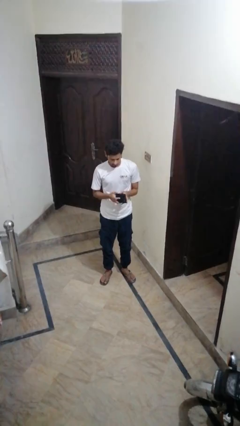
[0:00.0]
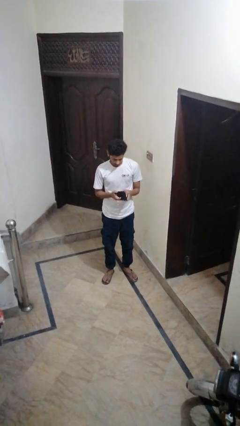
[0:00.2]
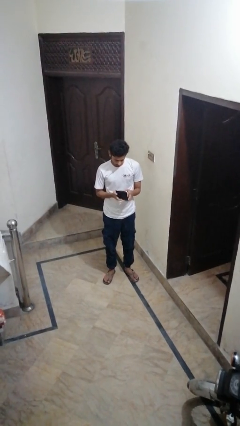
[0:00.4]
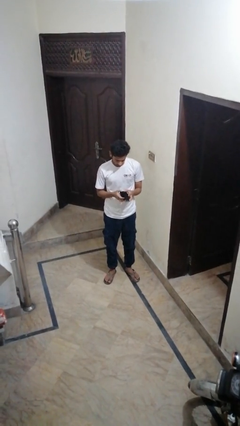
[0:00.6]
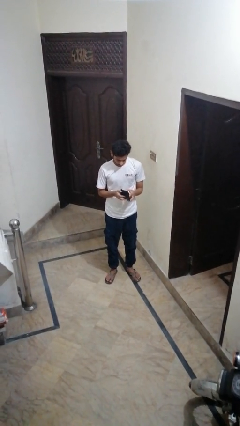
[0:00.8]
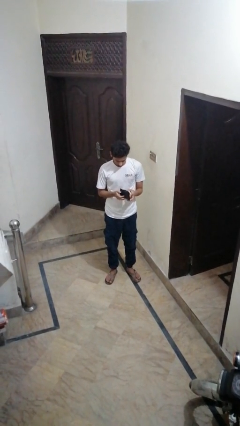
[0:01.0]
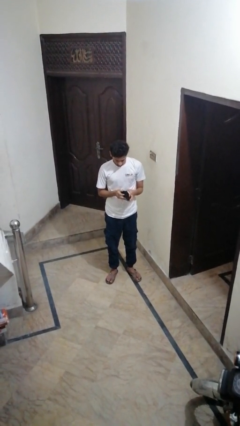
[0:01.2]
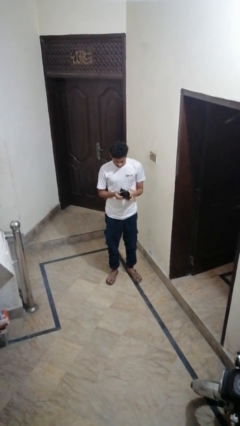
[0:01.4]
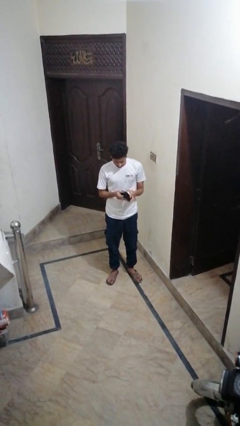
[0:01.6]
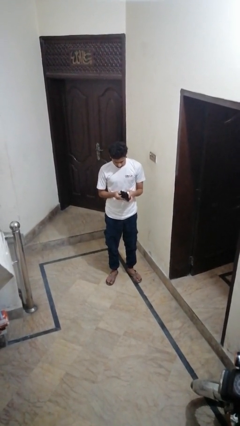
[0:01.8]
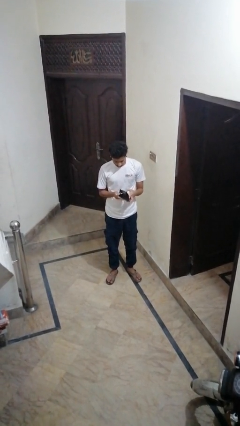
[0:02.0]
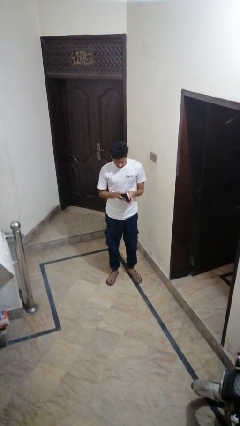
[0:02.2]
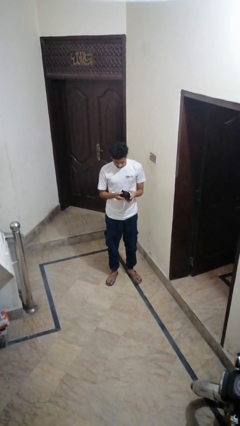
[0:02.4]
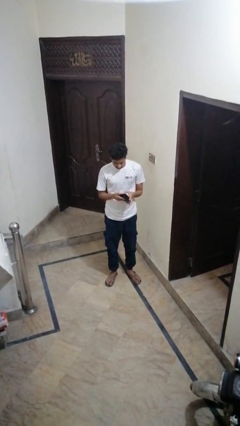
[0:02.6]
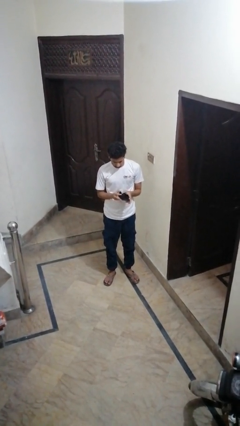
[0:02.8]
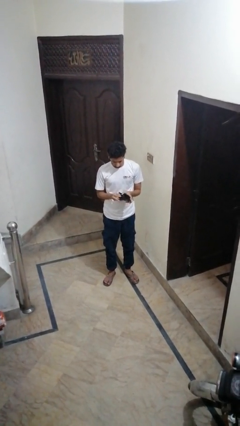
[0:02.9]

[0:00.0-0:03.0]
person searches in purse

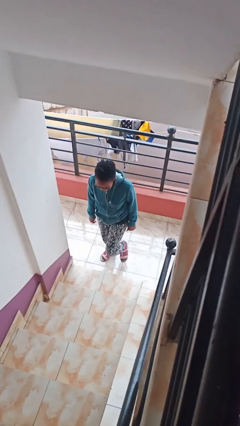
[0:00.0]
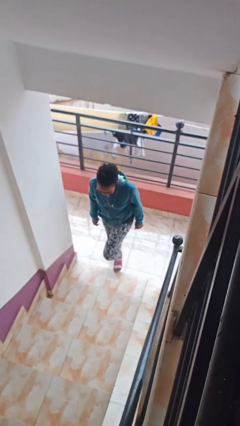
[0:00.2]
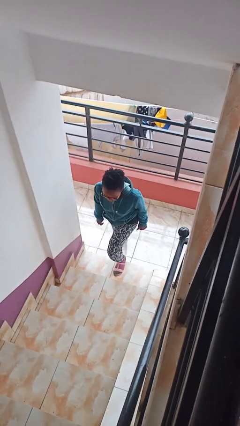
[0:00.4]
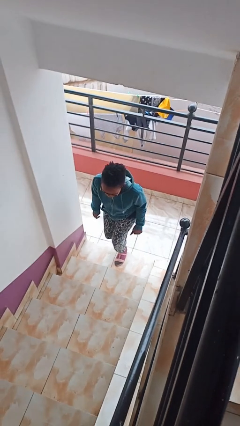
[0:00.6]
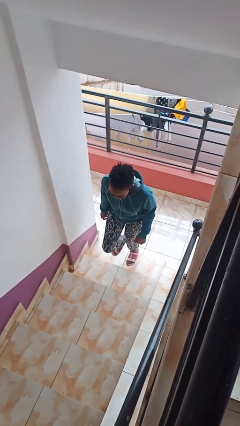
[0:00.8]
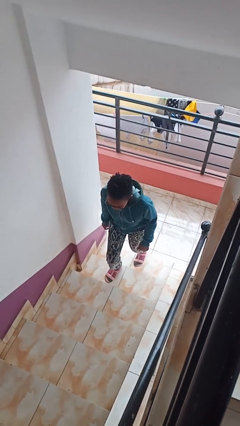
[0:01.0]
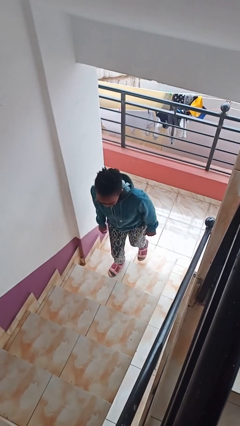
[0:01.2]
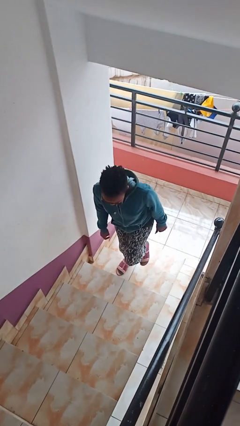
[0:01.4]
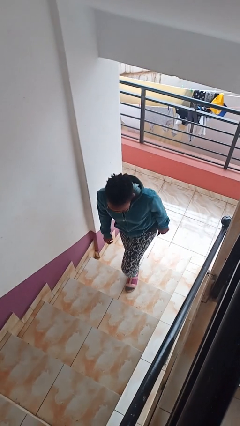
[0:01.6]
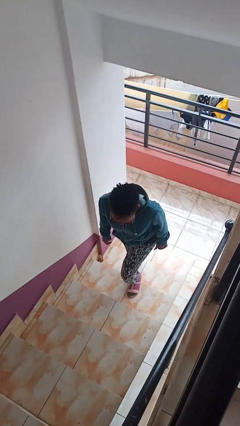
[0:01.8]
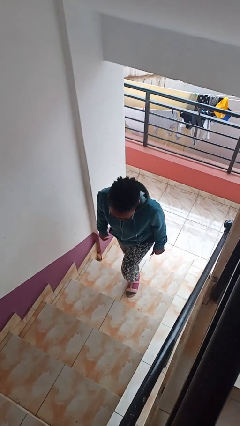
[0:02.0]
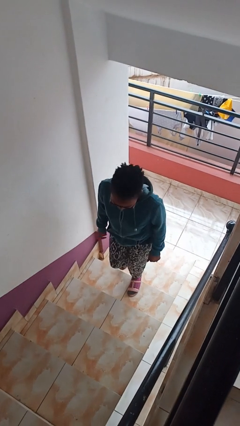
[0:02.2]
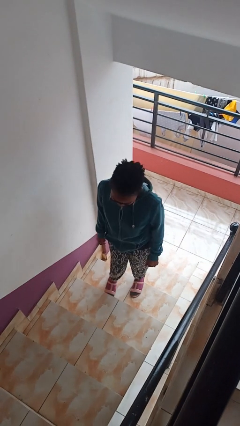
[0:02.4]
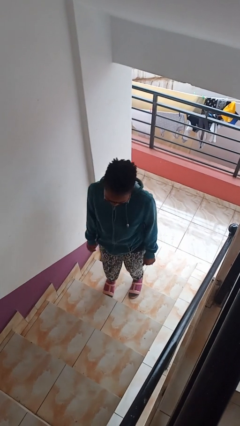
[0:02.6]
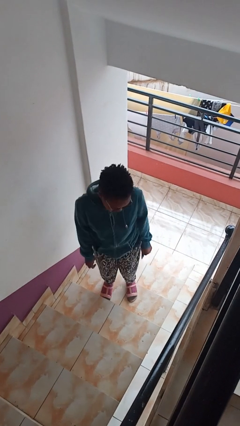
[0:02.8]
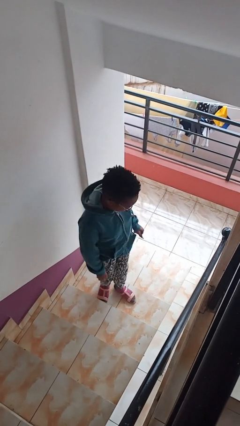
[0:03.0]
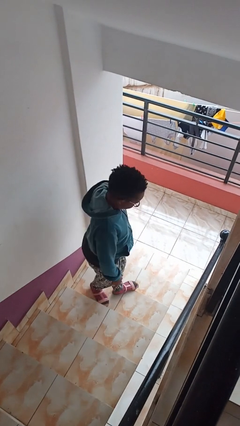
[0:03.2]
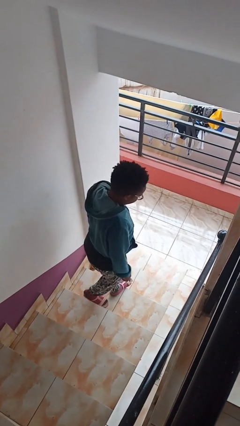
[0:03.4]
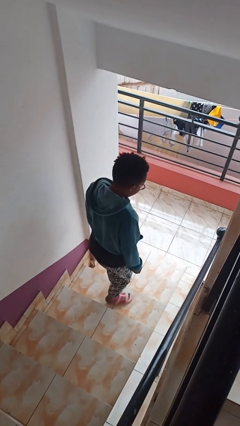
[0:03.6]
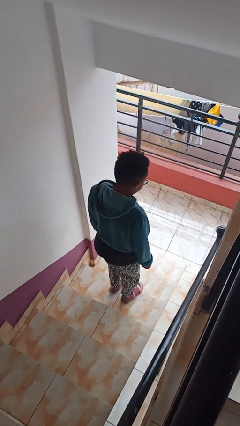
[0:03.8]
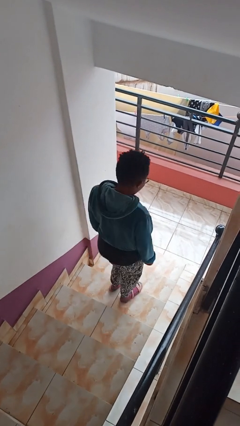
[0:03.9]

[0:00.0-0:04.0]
person climbs up stairs

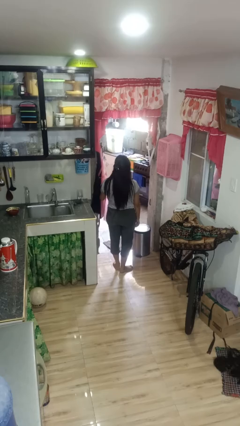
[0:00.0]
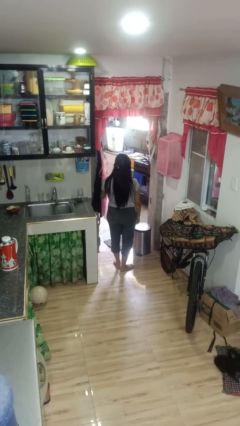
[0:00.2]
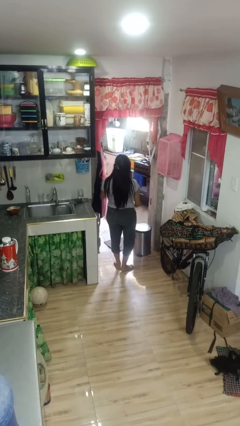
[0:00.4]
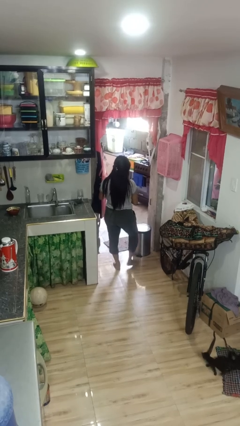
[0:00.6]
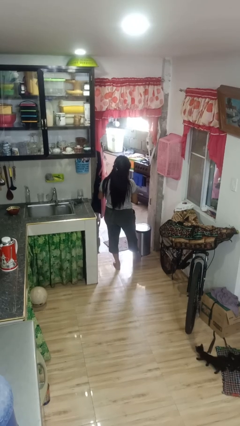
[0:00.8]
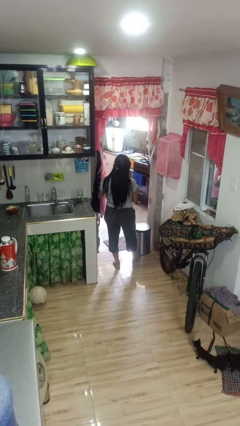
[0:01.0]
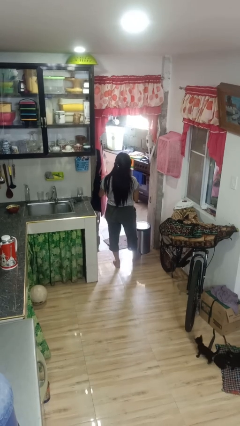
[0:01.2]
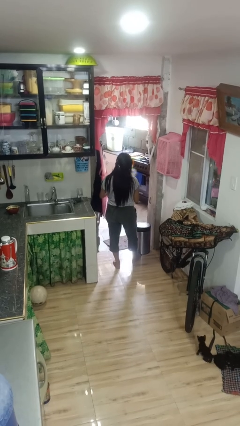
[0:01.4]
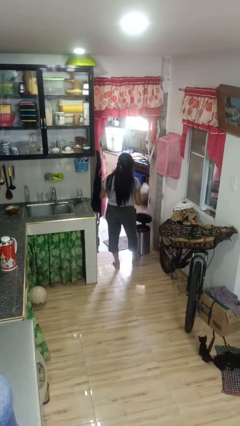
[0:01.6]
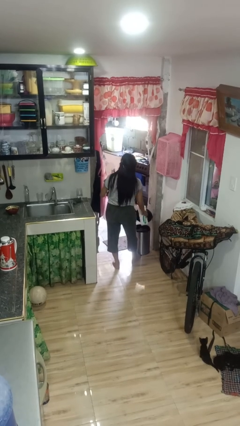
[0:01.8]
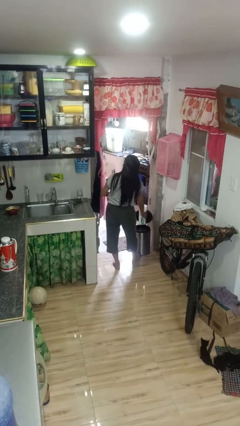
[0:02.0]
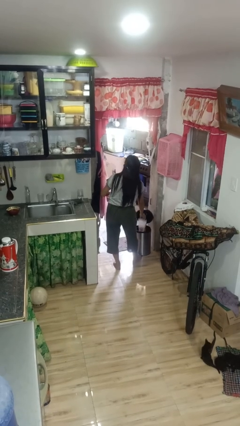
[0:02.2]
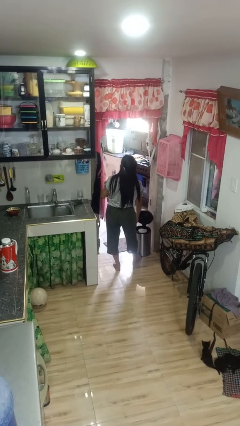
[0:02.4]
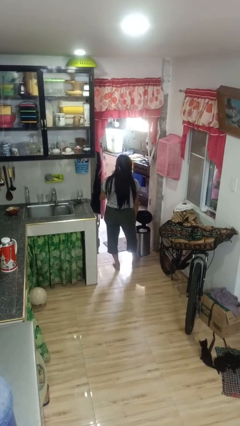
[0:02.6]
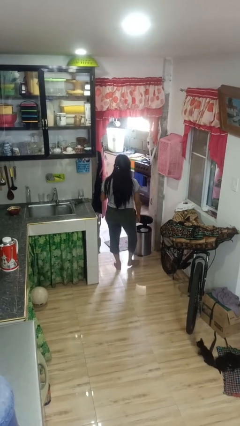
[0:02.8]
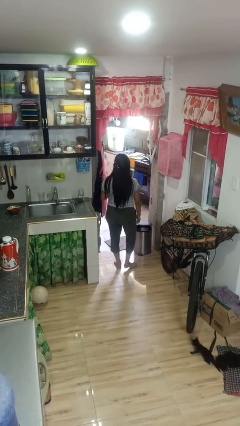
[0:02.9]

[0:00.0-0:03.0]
person discards trash

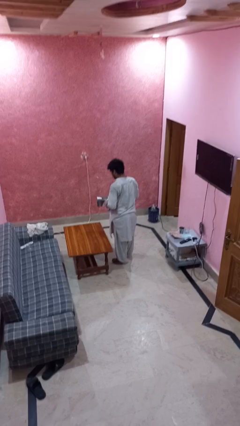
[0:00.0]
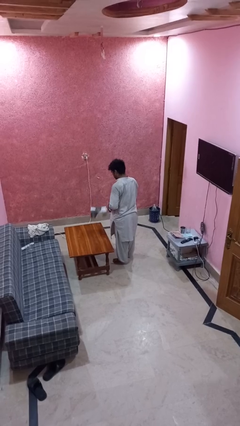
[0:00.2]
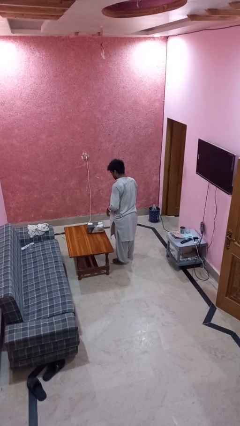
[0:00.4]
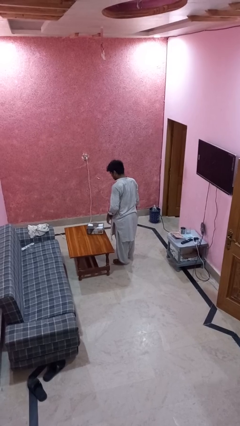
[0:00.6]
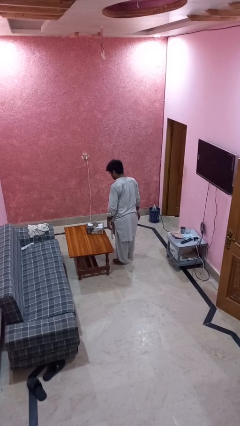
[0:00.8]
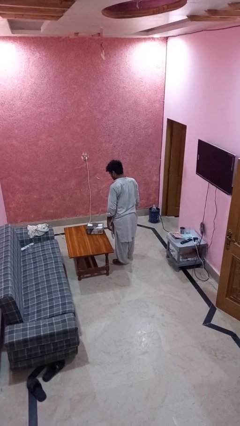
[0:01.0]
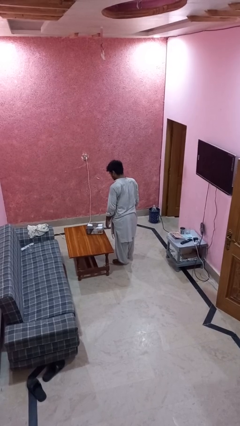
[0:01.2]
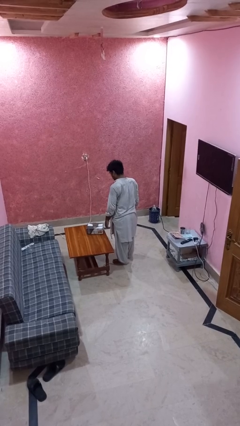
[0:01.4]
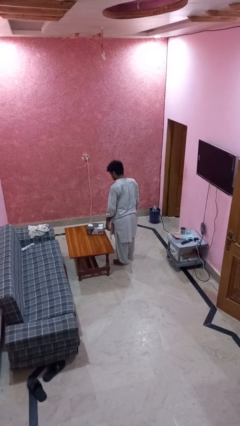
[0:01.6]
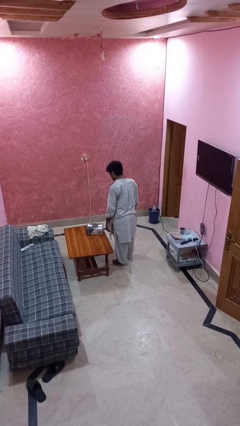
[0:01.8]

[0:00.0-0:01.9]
person throws object on table

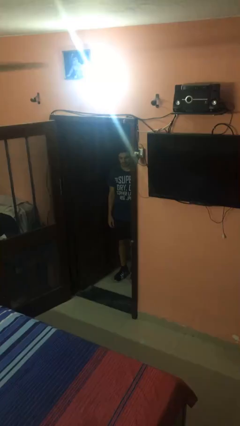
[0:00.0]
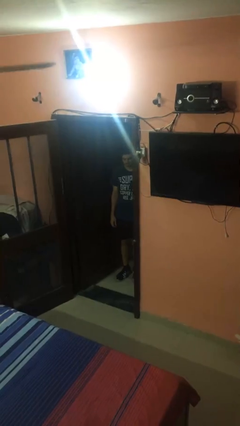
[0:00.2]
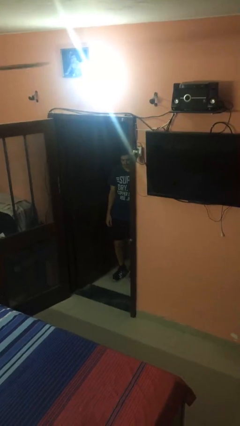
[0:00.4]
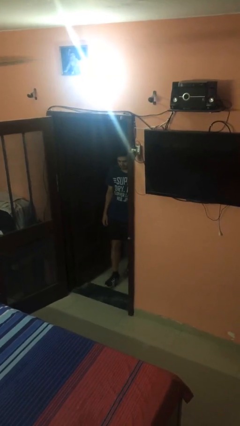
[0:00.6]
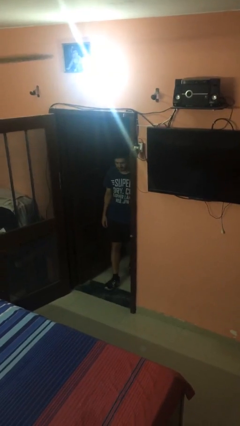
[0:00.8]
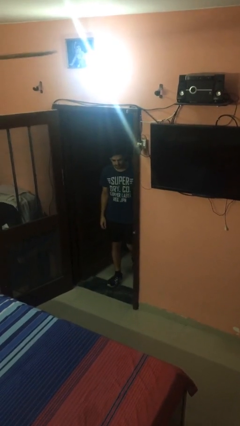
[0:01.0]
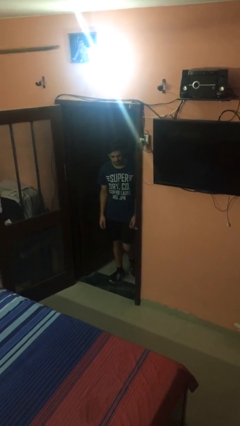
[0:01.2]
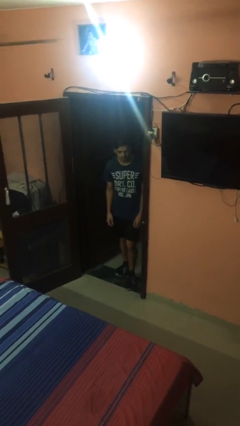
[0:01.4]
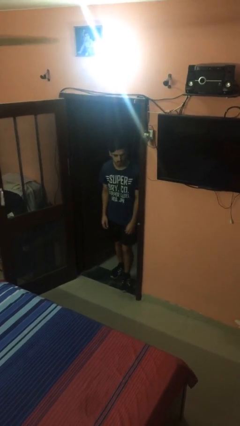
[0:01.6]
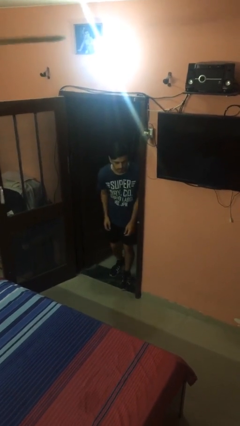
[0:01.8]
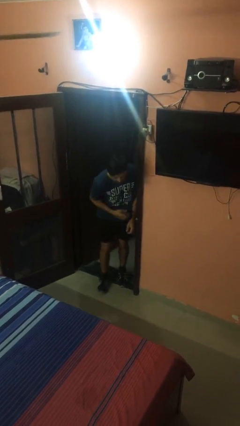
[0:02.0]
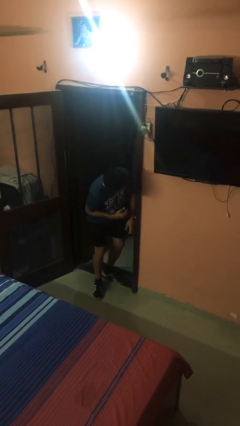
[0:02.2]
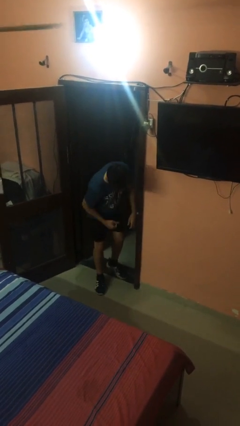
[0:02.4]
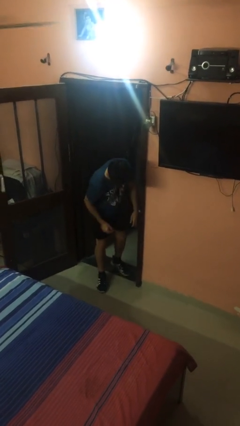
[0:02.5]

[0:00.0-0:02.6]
person bumps into wall

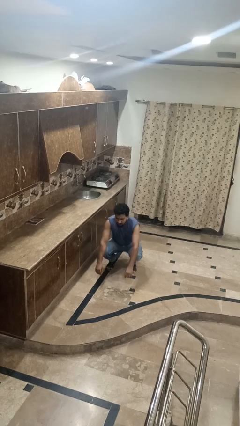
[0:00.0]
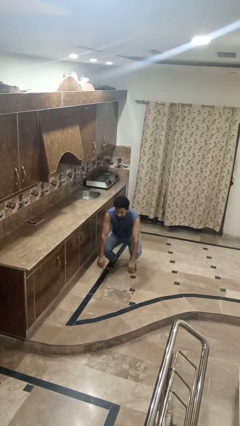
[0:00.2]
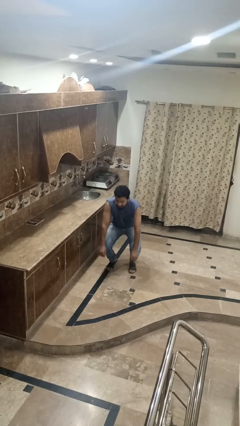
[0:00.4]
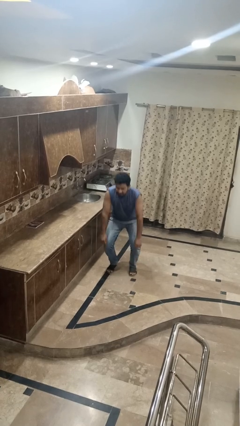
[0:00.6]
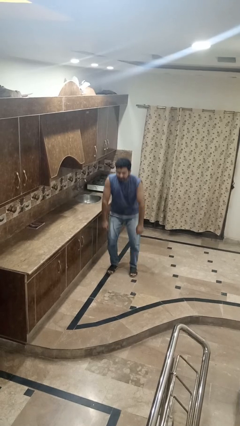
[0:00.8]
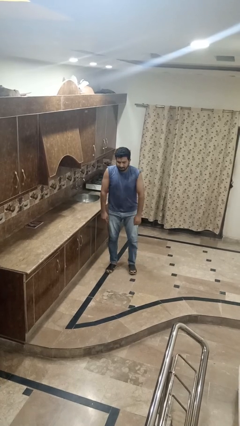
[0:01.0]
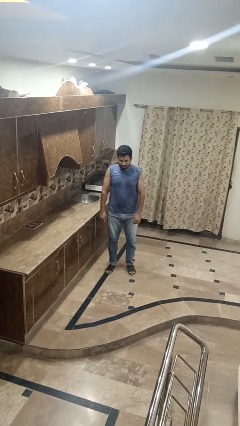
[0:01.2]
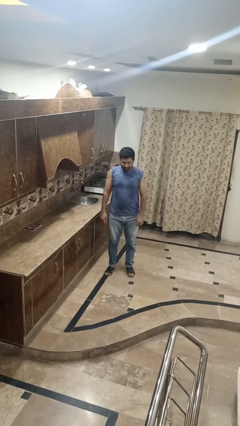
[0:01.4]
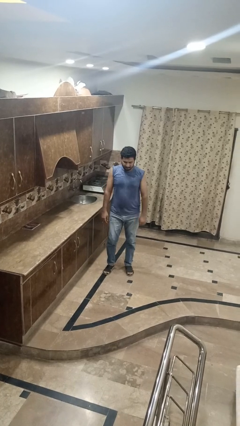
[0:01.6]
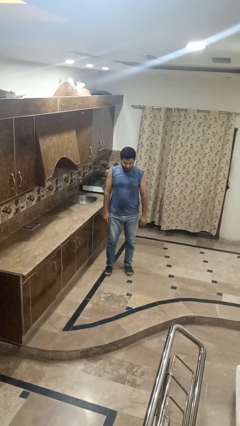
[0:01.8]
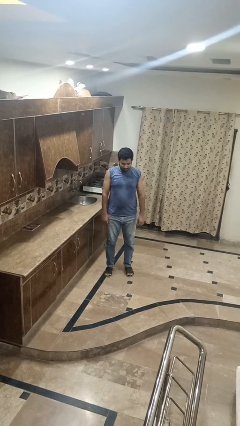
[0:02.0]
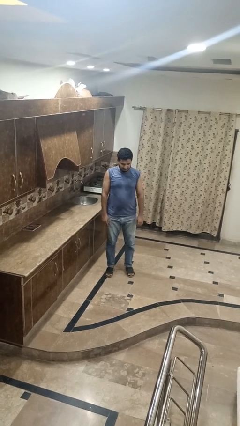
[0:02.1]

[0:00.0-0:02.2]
person stands up

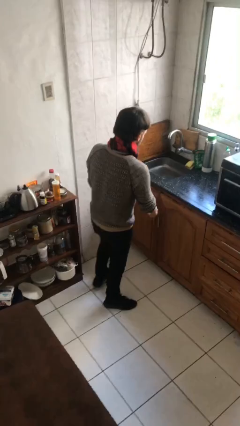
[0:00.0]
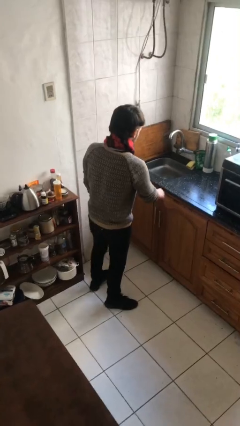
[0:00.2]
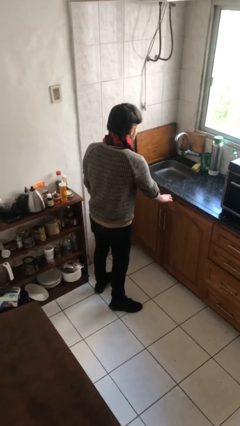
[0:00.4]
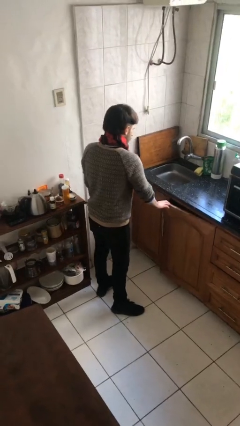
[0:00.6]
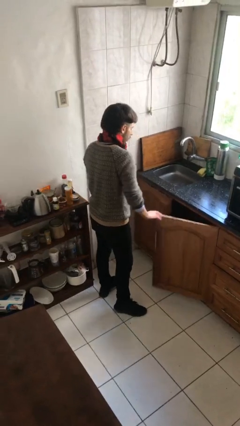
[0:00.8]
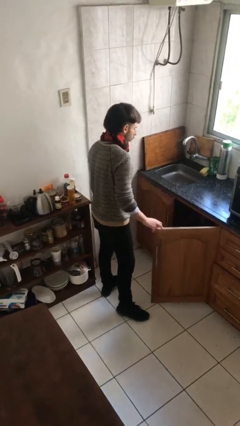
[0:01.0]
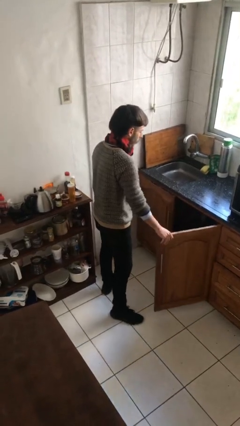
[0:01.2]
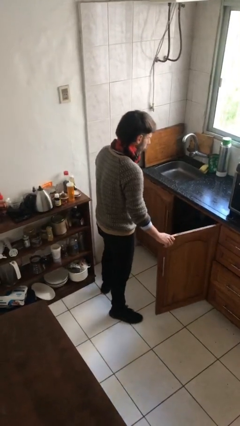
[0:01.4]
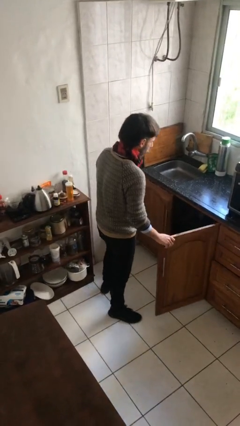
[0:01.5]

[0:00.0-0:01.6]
person closes cabinet
